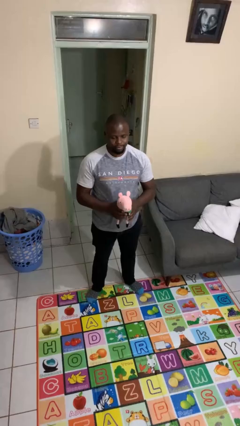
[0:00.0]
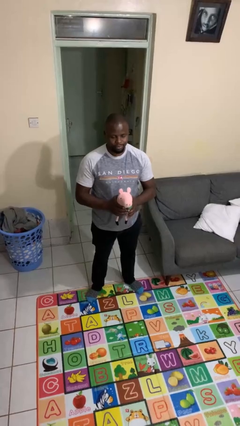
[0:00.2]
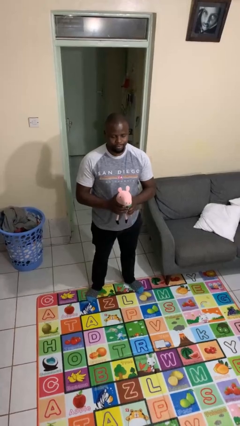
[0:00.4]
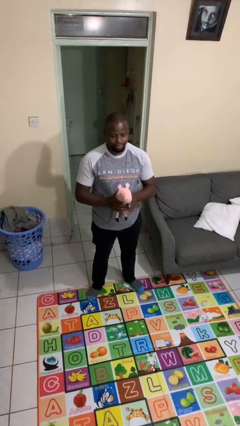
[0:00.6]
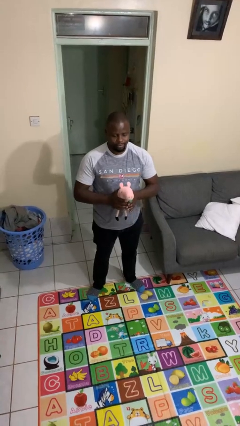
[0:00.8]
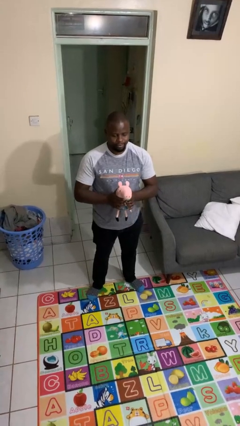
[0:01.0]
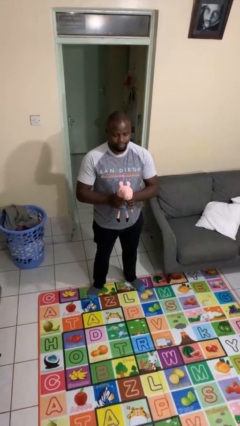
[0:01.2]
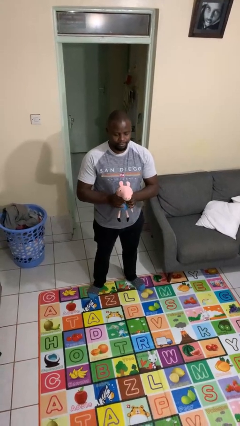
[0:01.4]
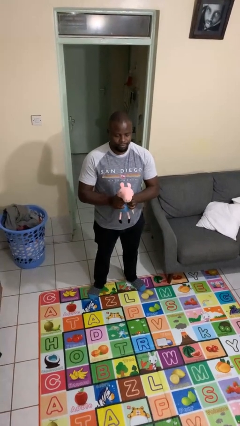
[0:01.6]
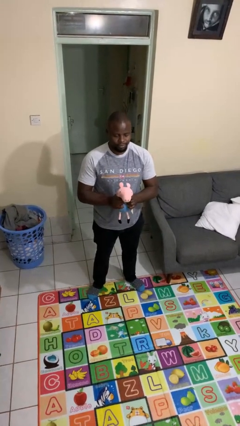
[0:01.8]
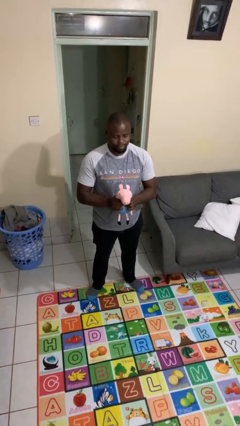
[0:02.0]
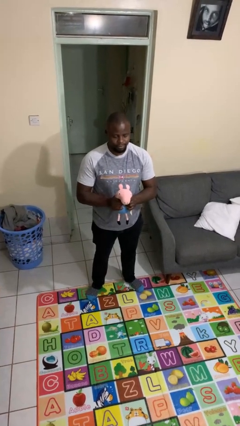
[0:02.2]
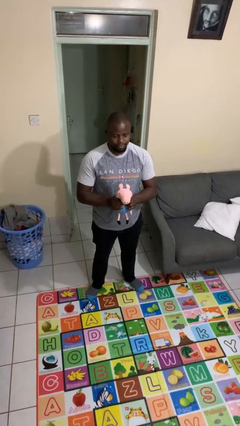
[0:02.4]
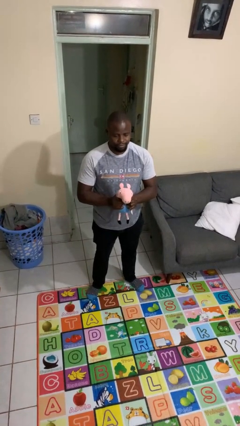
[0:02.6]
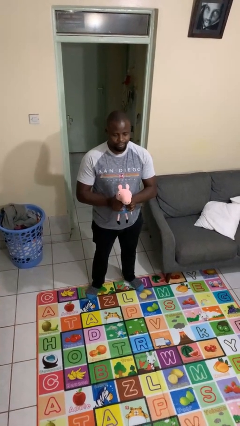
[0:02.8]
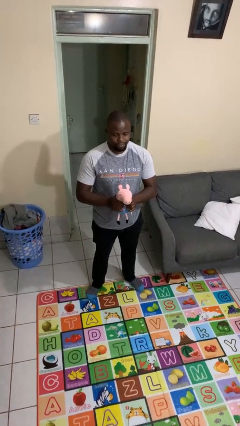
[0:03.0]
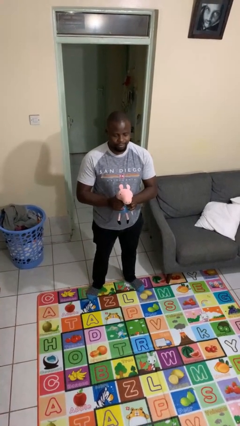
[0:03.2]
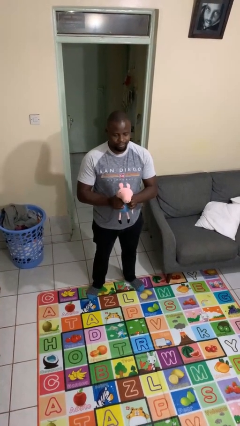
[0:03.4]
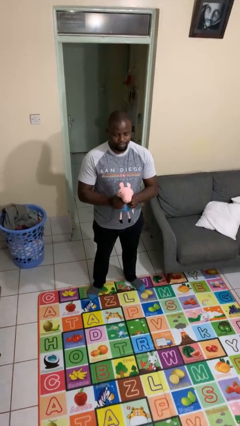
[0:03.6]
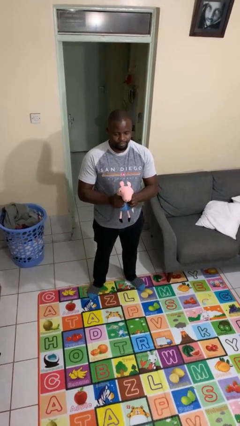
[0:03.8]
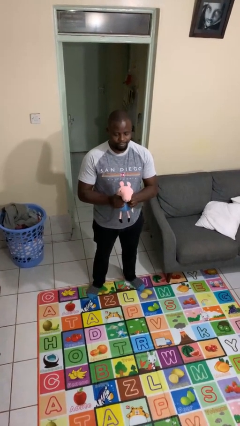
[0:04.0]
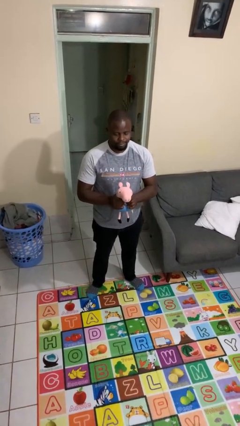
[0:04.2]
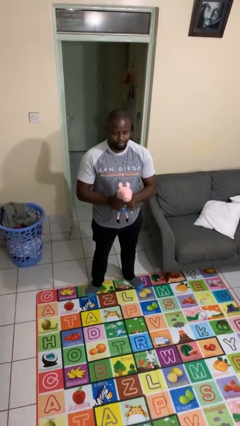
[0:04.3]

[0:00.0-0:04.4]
person squeezes object

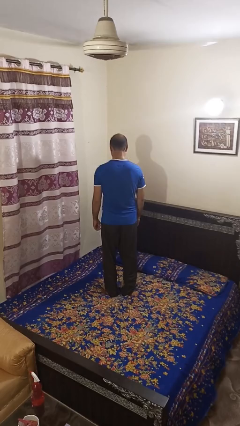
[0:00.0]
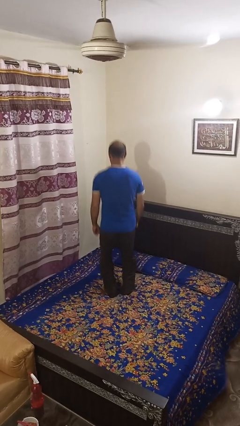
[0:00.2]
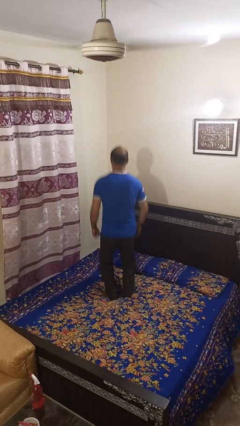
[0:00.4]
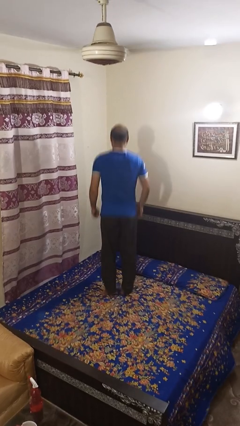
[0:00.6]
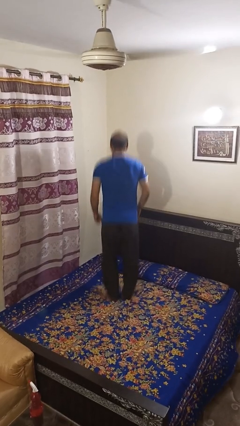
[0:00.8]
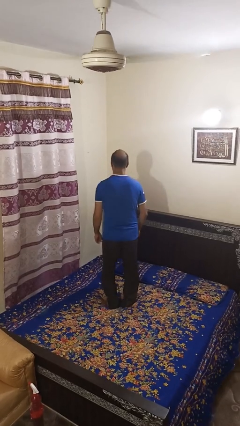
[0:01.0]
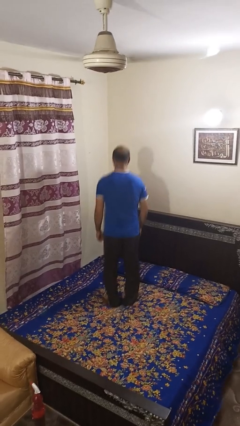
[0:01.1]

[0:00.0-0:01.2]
person jumps on bed

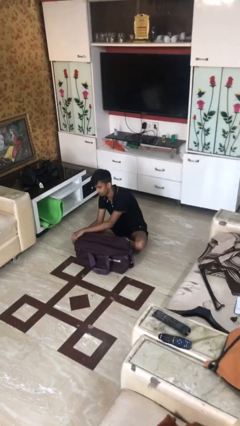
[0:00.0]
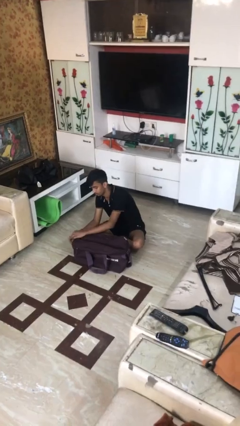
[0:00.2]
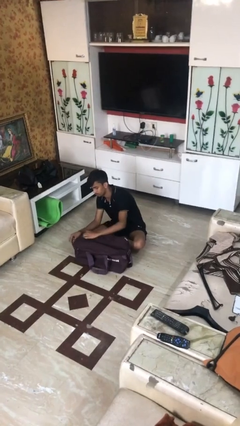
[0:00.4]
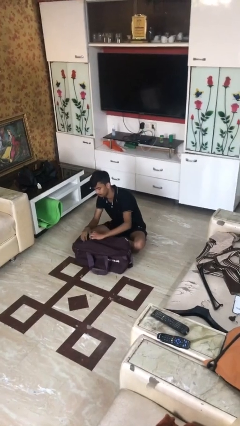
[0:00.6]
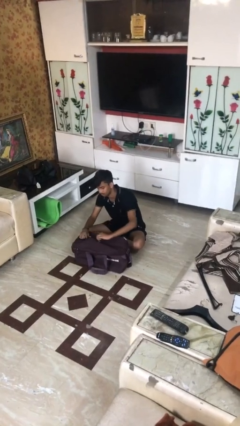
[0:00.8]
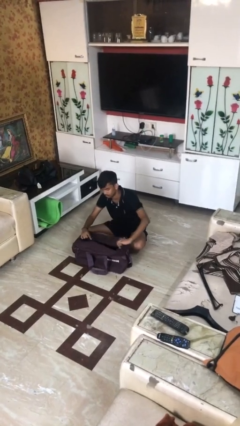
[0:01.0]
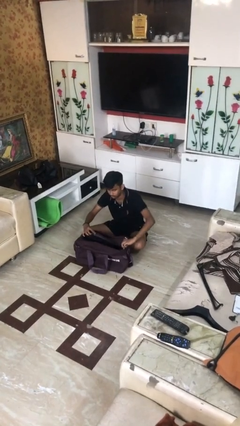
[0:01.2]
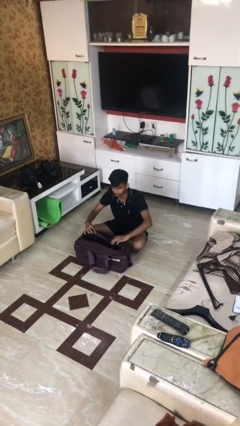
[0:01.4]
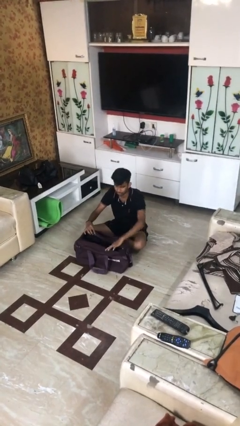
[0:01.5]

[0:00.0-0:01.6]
person opens suitcase

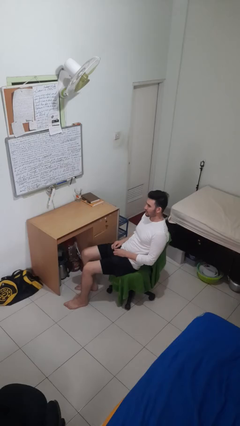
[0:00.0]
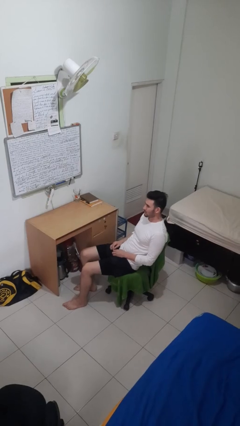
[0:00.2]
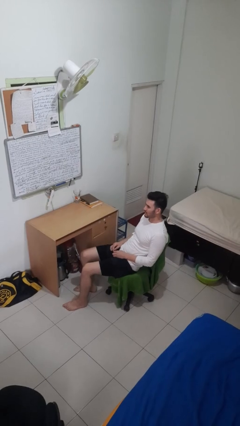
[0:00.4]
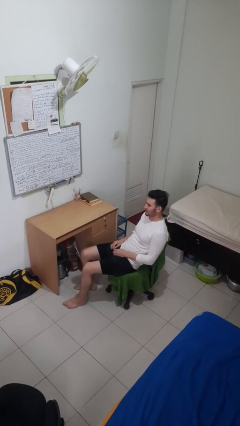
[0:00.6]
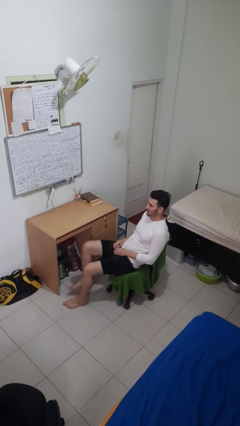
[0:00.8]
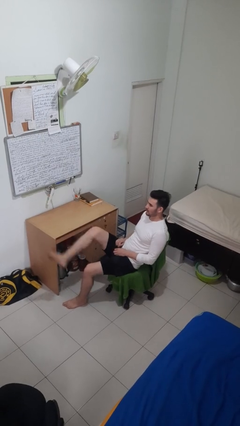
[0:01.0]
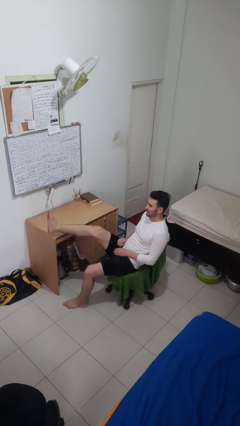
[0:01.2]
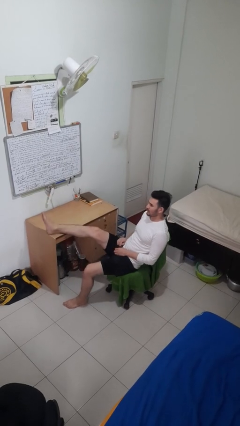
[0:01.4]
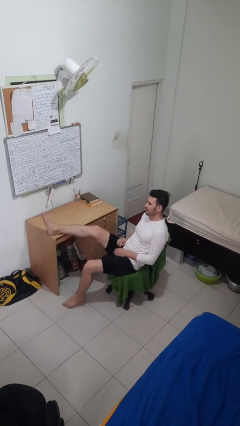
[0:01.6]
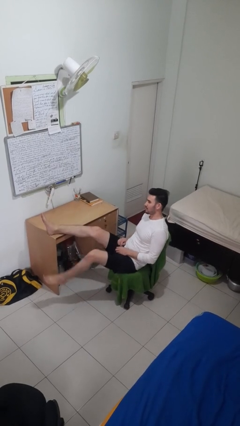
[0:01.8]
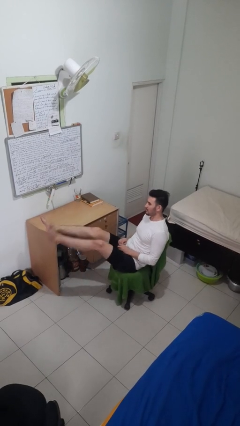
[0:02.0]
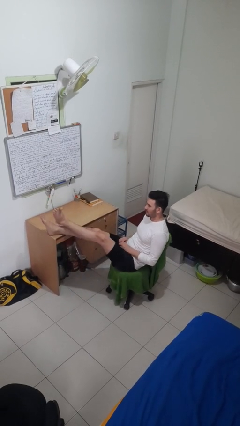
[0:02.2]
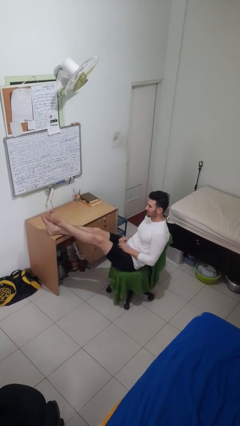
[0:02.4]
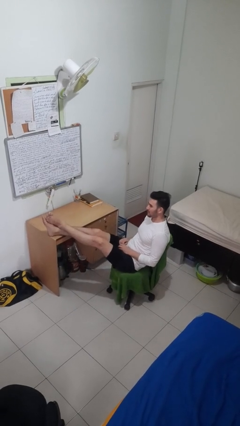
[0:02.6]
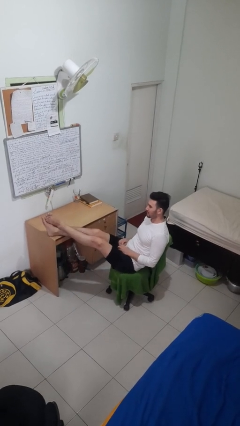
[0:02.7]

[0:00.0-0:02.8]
person puts feet up

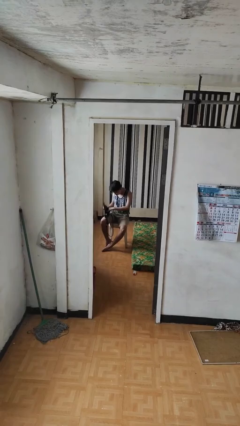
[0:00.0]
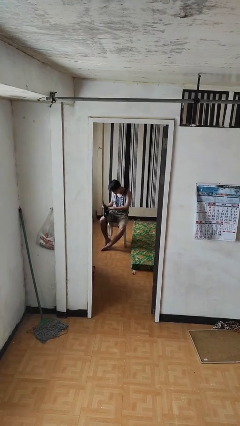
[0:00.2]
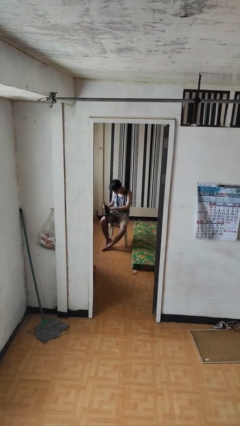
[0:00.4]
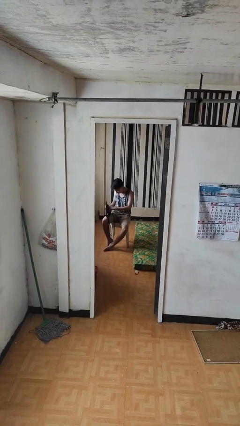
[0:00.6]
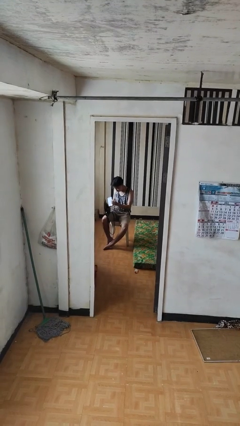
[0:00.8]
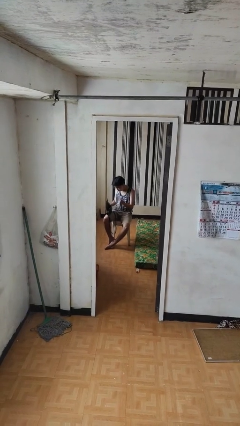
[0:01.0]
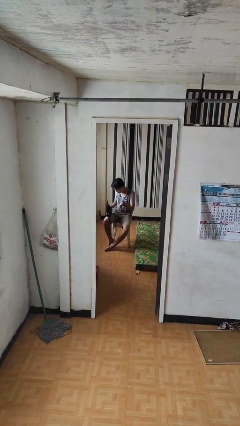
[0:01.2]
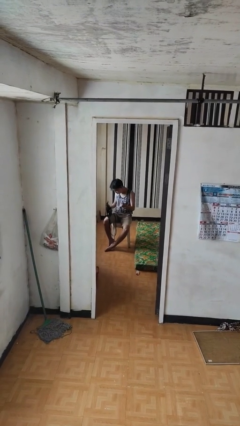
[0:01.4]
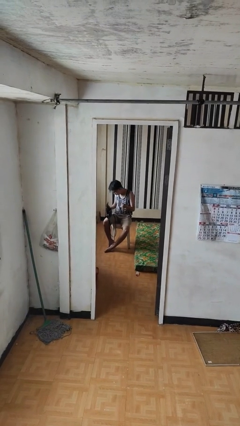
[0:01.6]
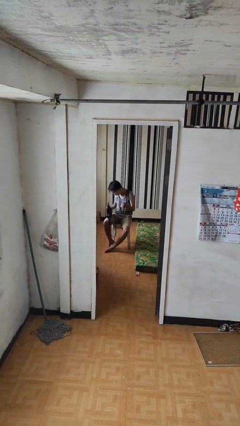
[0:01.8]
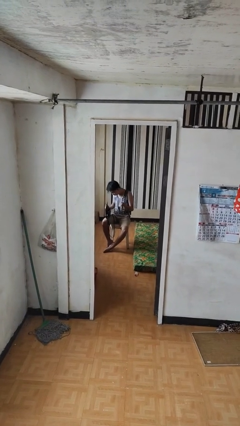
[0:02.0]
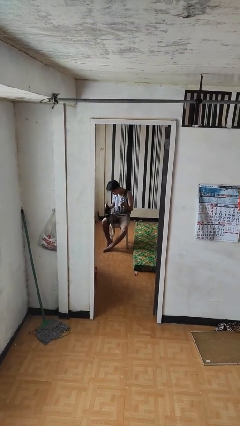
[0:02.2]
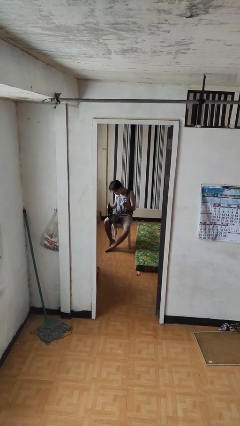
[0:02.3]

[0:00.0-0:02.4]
person takes object from purse

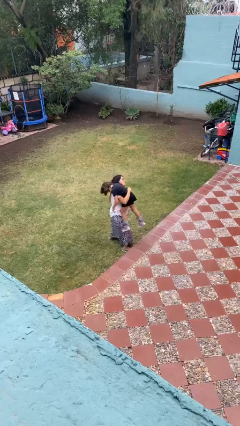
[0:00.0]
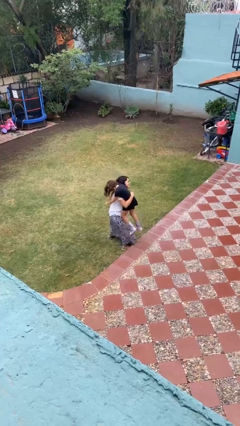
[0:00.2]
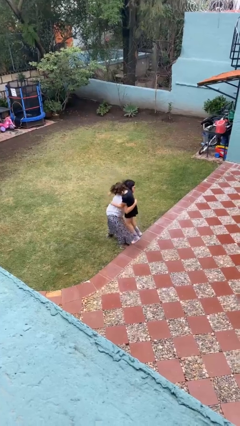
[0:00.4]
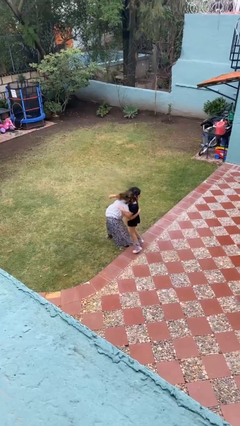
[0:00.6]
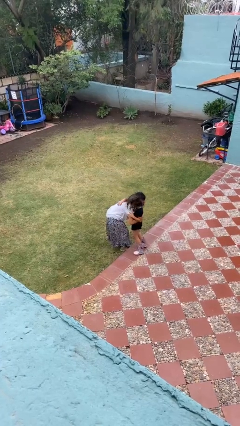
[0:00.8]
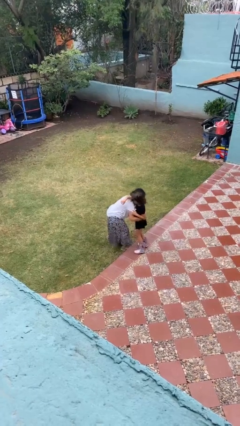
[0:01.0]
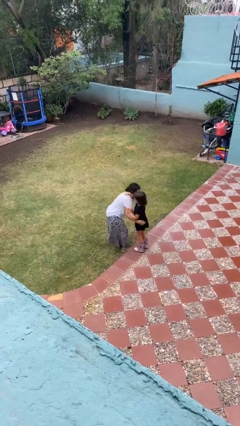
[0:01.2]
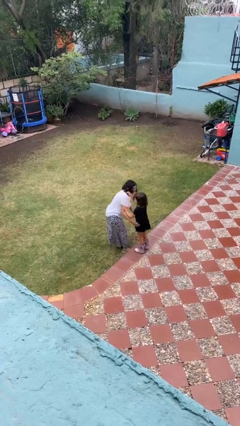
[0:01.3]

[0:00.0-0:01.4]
person puts down person

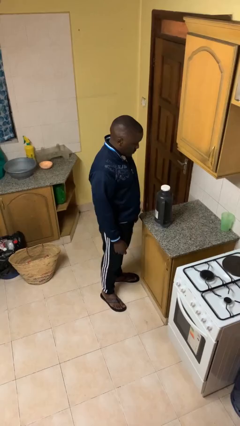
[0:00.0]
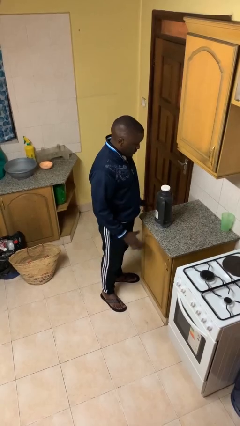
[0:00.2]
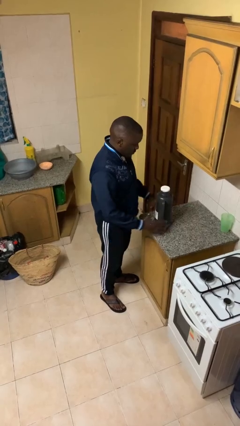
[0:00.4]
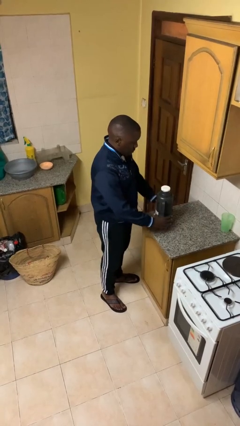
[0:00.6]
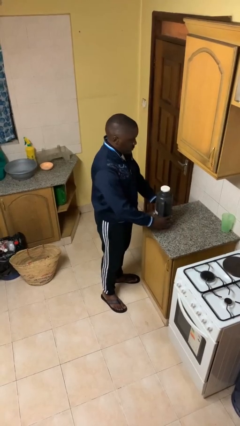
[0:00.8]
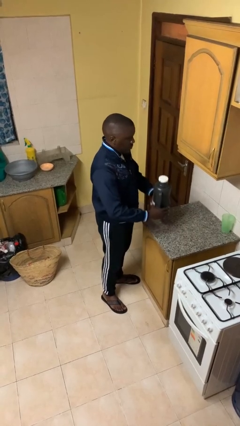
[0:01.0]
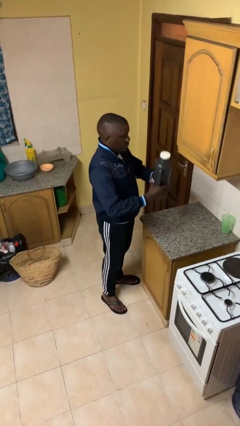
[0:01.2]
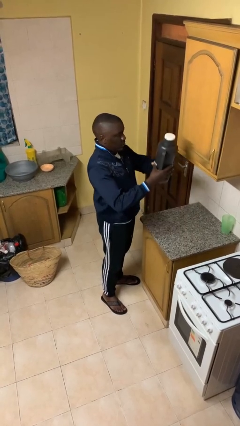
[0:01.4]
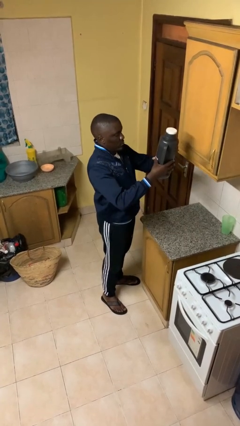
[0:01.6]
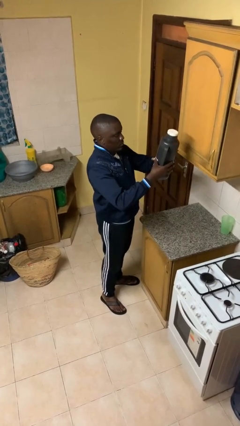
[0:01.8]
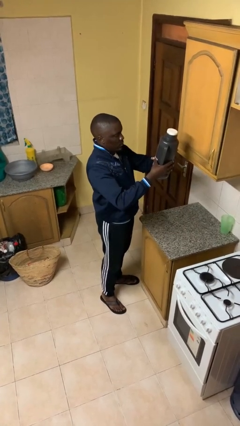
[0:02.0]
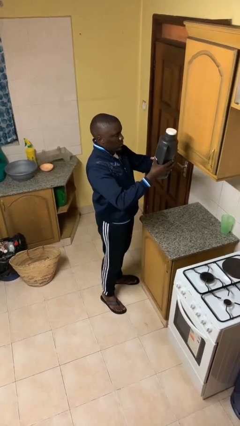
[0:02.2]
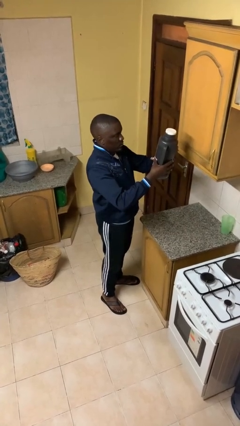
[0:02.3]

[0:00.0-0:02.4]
person picks up object from countertop

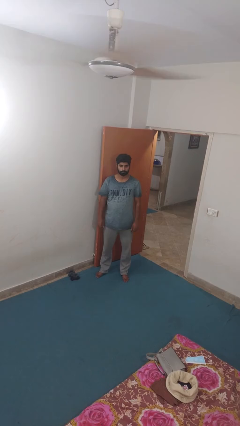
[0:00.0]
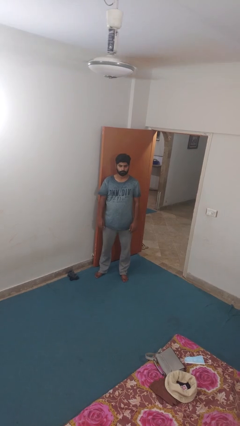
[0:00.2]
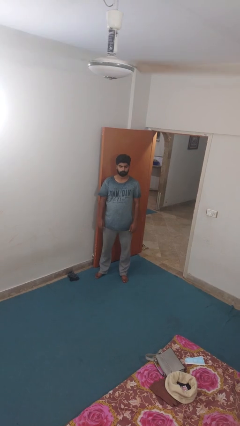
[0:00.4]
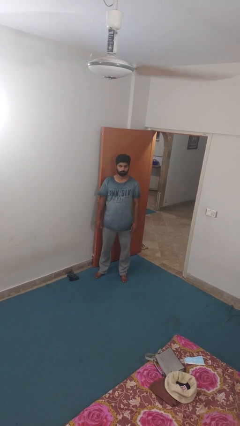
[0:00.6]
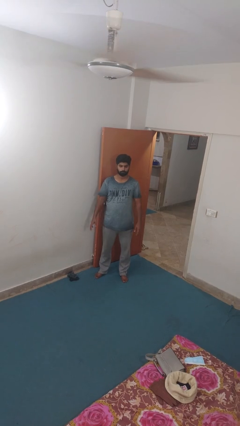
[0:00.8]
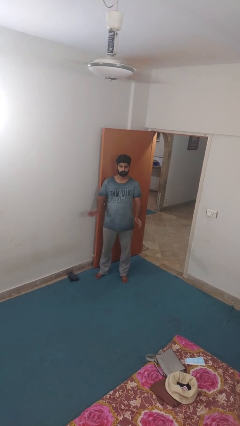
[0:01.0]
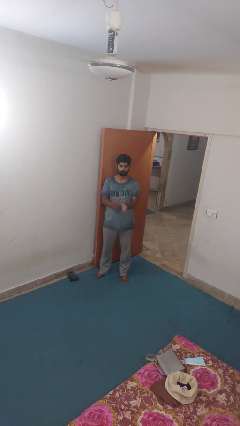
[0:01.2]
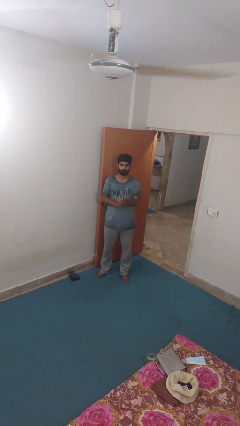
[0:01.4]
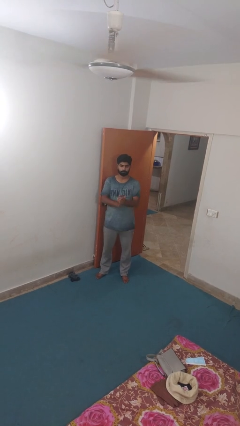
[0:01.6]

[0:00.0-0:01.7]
person claps hands
